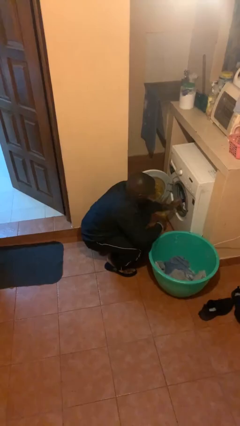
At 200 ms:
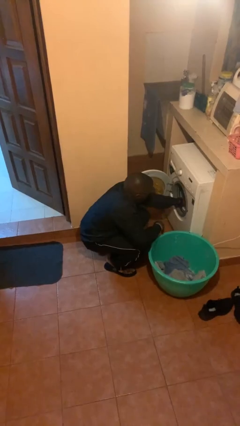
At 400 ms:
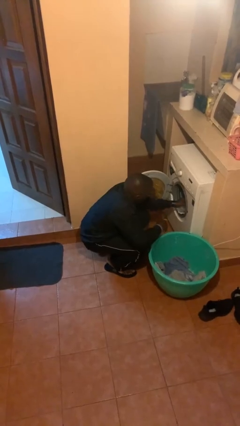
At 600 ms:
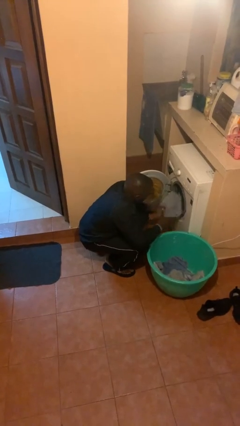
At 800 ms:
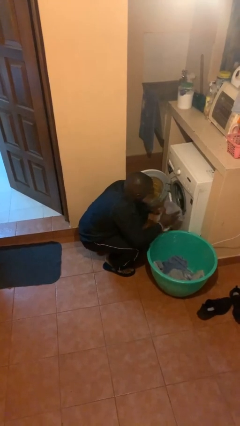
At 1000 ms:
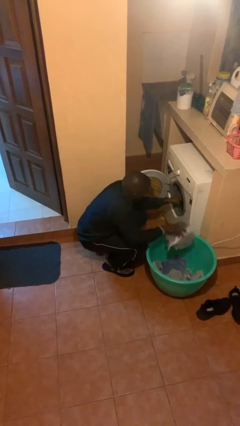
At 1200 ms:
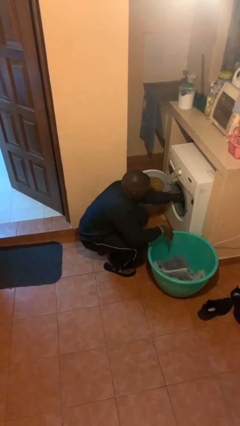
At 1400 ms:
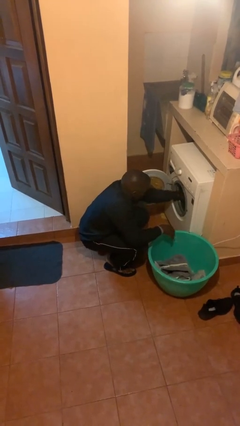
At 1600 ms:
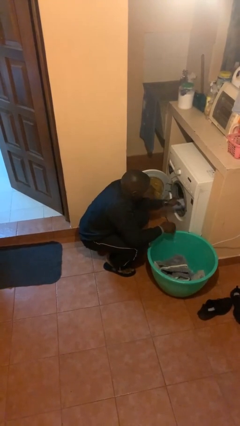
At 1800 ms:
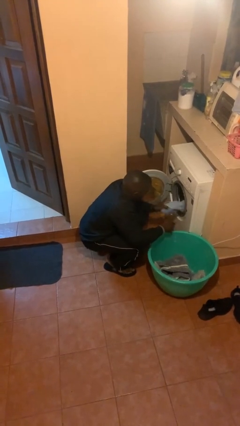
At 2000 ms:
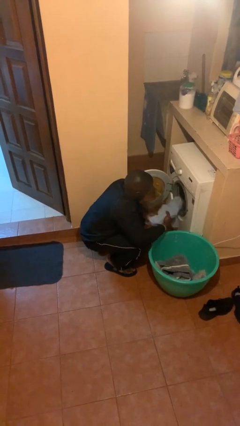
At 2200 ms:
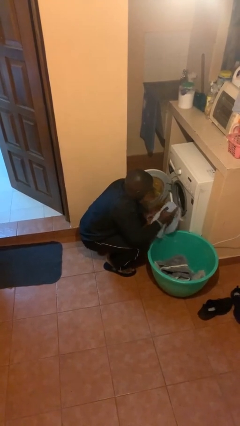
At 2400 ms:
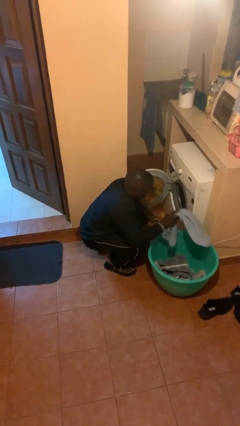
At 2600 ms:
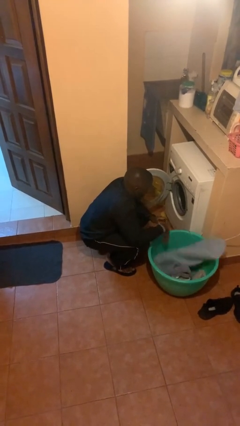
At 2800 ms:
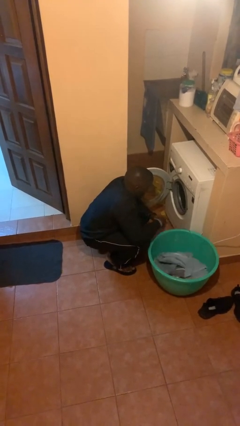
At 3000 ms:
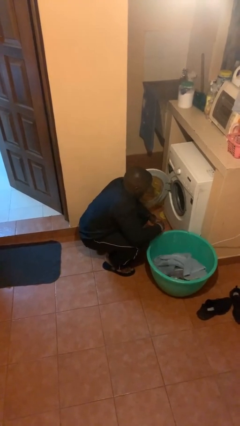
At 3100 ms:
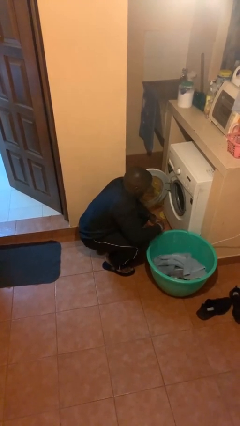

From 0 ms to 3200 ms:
person loads clotheswasher

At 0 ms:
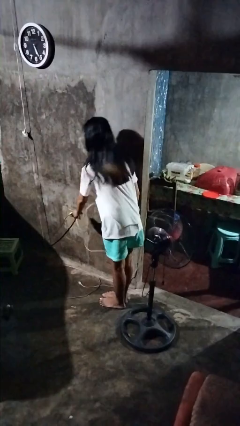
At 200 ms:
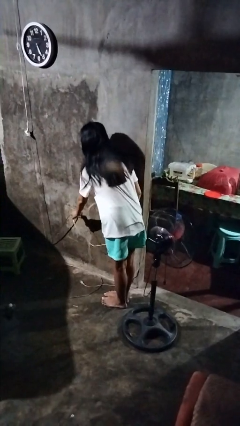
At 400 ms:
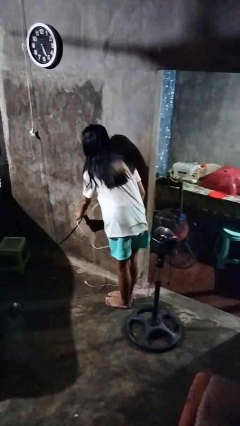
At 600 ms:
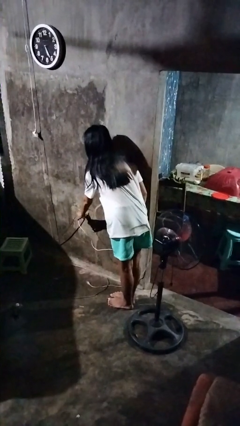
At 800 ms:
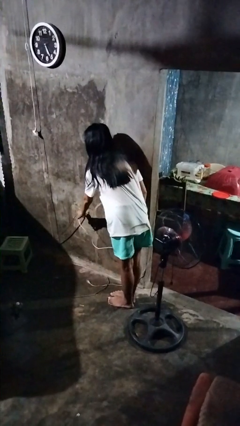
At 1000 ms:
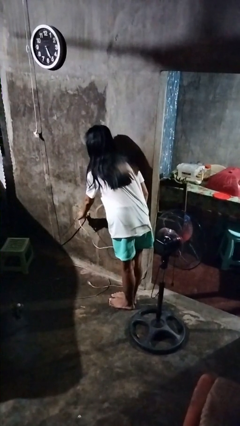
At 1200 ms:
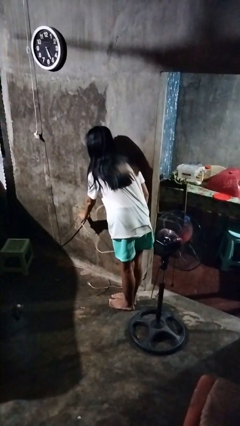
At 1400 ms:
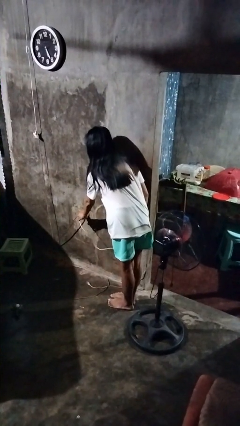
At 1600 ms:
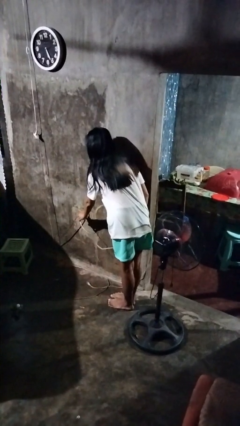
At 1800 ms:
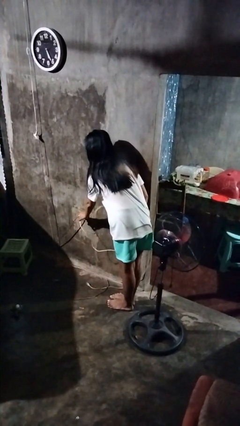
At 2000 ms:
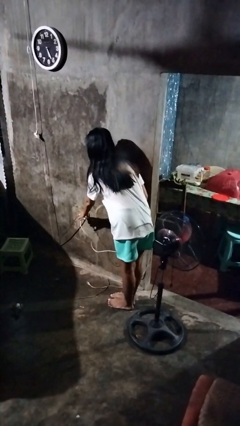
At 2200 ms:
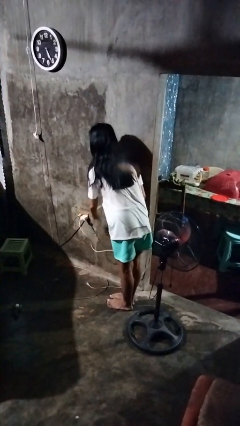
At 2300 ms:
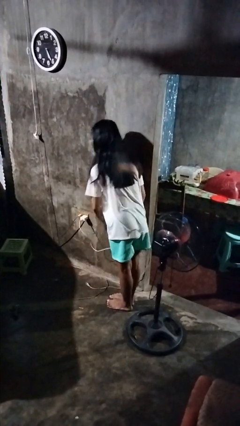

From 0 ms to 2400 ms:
person plugs into electrical socket

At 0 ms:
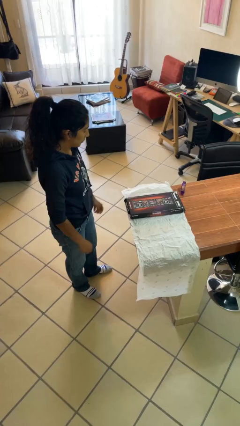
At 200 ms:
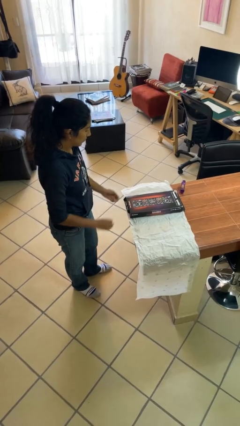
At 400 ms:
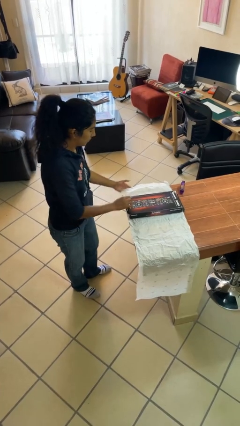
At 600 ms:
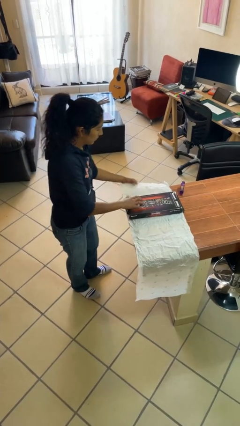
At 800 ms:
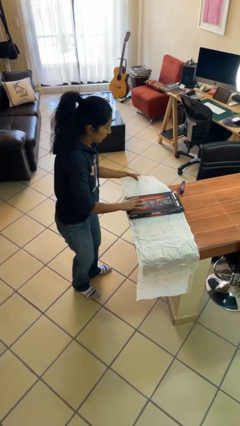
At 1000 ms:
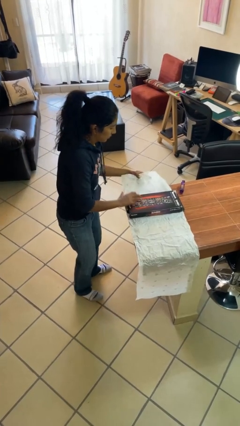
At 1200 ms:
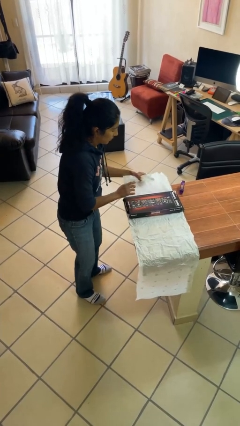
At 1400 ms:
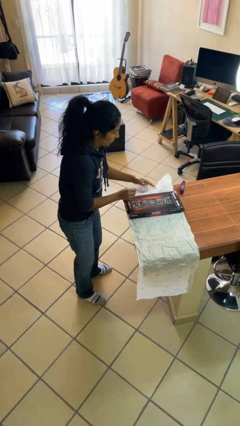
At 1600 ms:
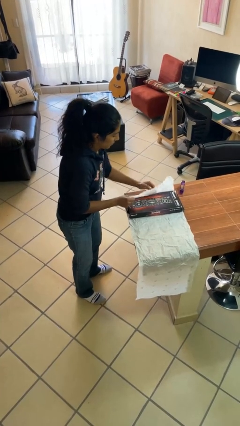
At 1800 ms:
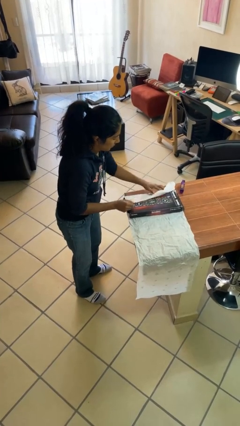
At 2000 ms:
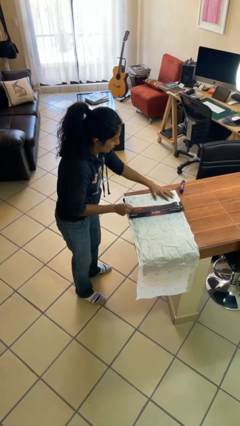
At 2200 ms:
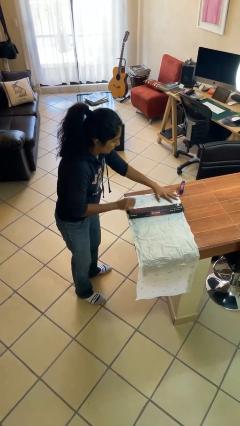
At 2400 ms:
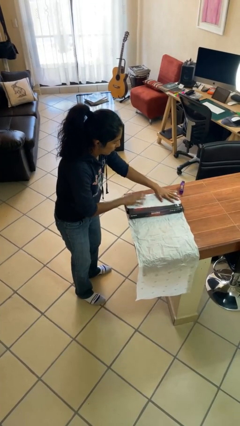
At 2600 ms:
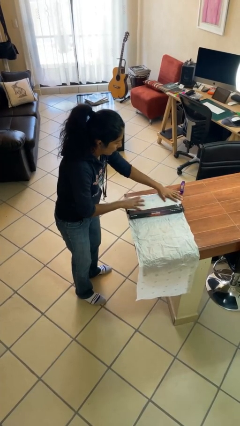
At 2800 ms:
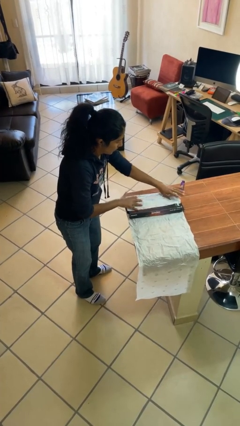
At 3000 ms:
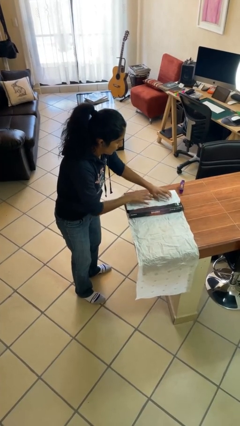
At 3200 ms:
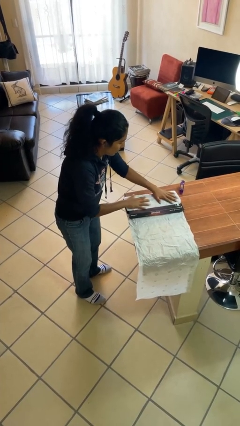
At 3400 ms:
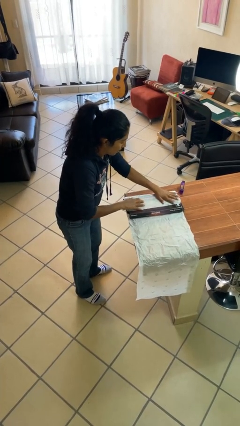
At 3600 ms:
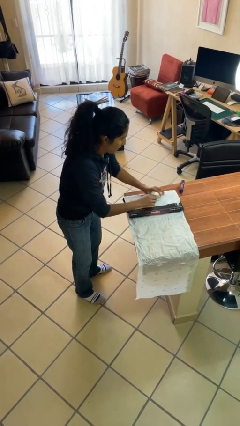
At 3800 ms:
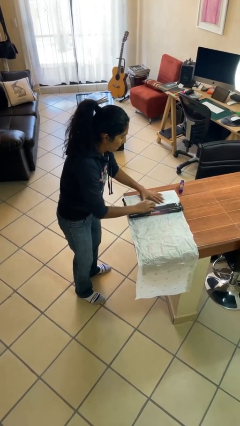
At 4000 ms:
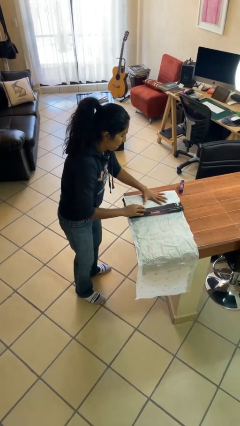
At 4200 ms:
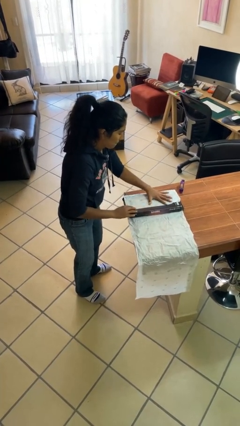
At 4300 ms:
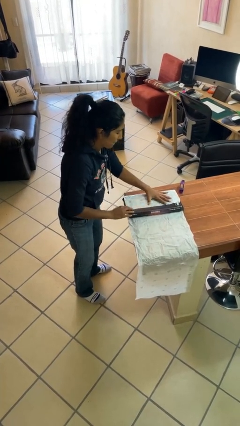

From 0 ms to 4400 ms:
person wraps box

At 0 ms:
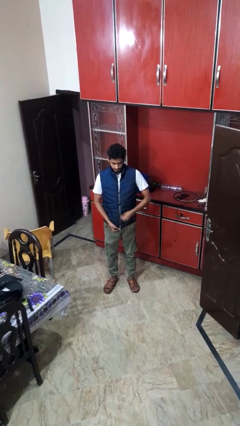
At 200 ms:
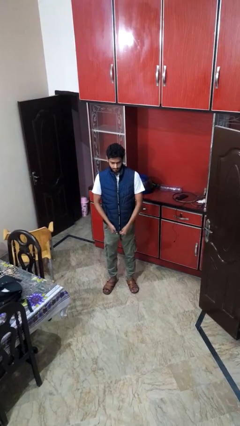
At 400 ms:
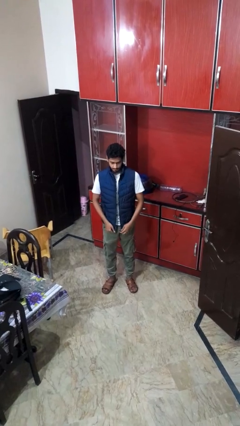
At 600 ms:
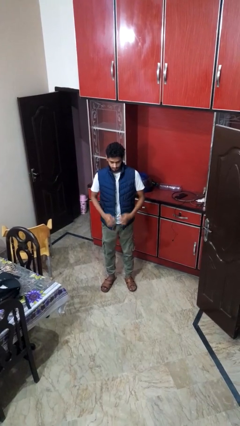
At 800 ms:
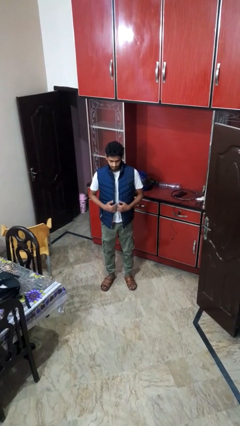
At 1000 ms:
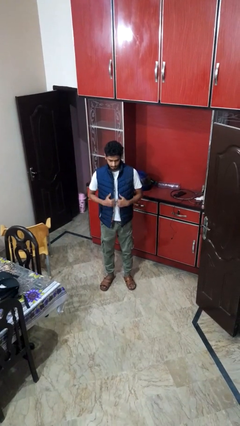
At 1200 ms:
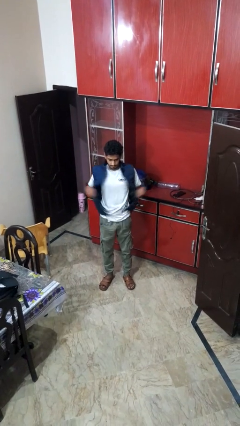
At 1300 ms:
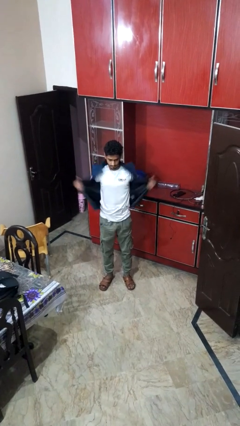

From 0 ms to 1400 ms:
person unzips jacket

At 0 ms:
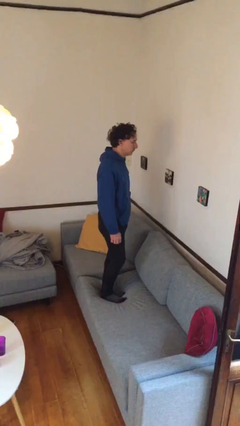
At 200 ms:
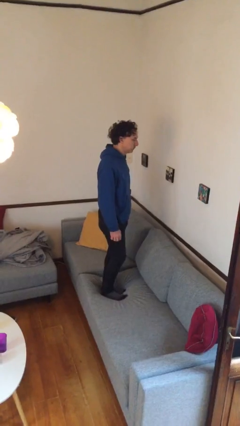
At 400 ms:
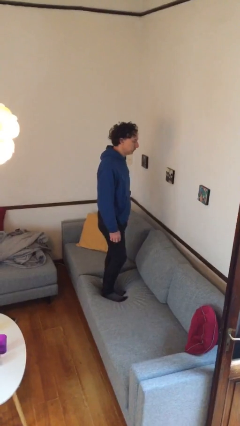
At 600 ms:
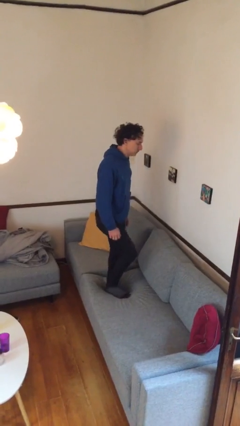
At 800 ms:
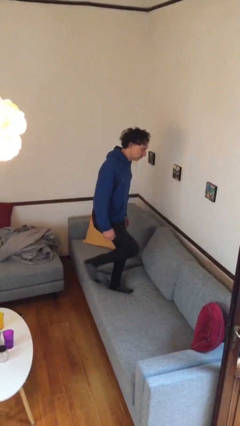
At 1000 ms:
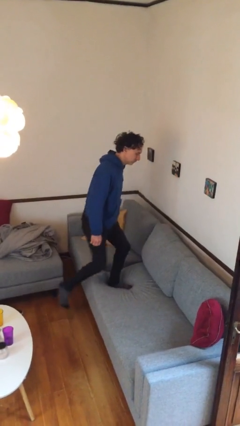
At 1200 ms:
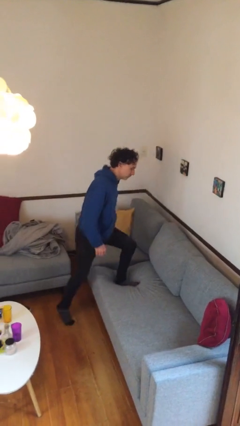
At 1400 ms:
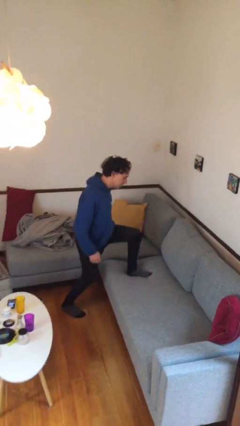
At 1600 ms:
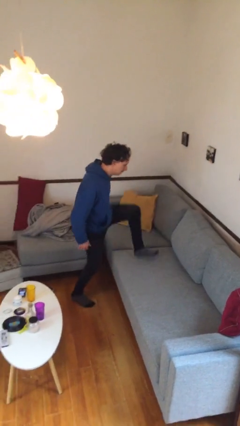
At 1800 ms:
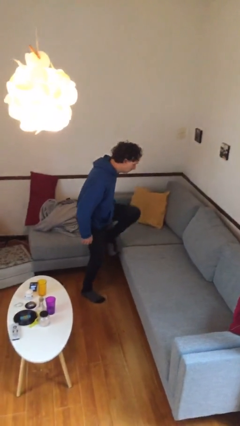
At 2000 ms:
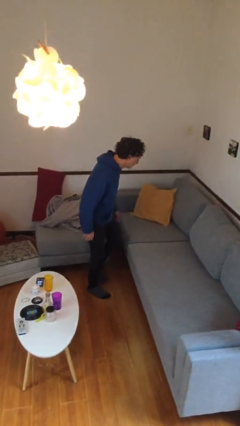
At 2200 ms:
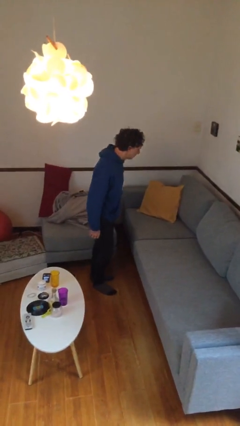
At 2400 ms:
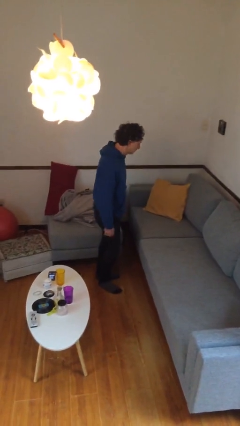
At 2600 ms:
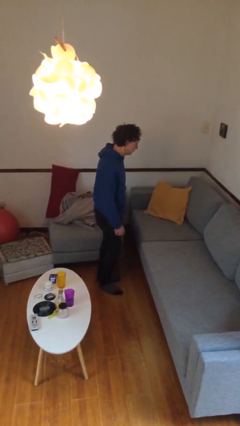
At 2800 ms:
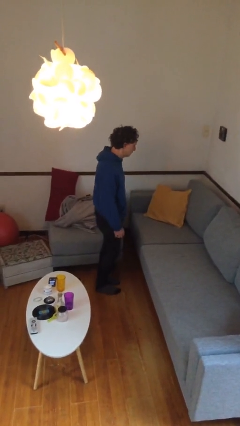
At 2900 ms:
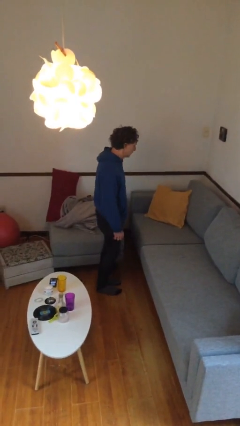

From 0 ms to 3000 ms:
person climbs off couch

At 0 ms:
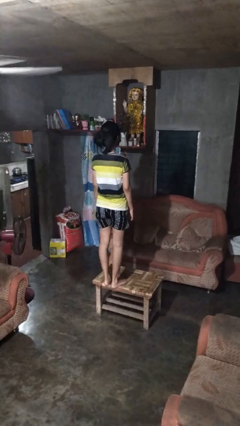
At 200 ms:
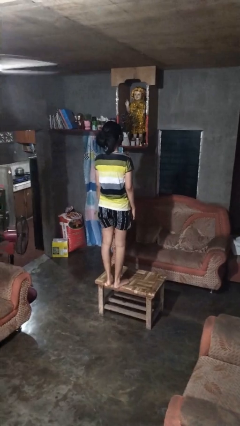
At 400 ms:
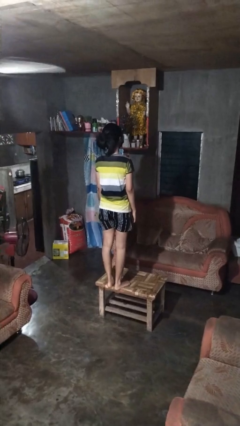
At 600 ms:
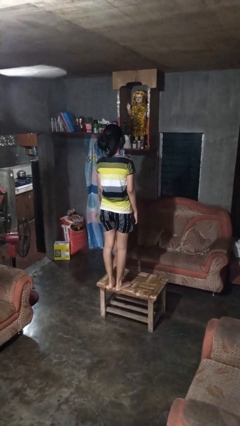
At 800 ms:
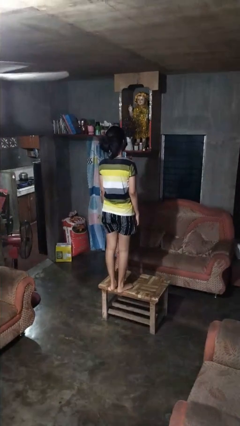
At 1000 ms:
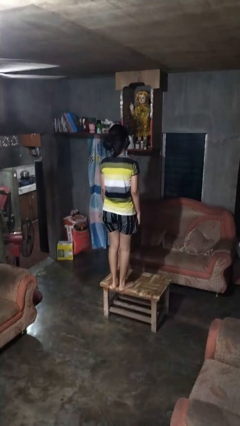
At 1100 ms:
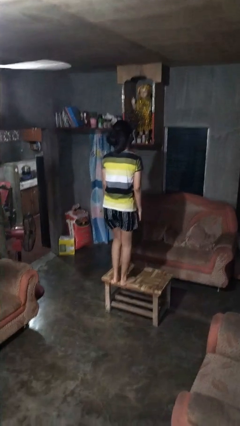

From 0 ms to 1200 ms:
person climbs off table

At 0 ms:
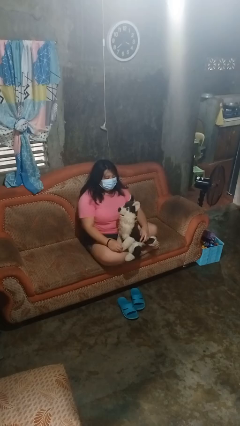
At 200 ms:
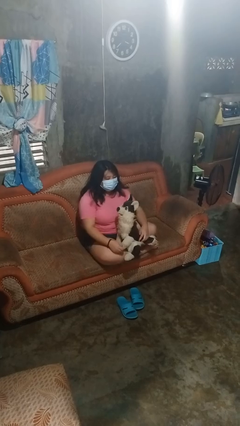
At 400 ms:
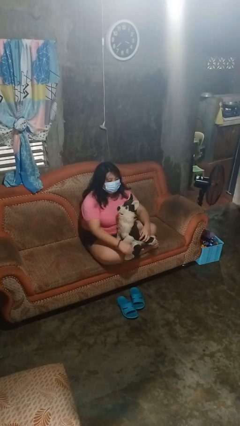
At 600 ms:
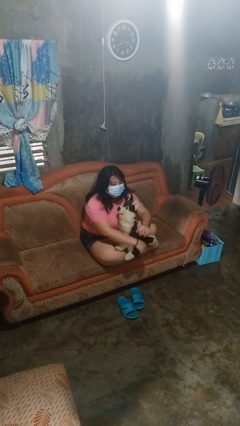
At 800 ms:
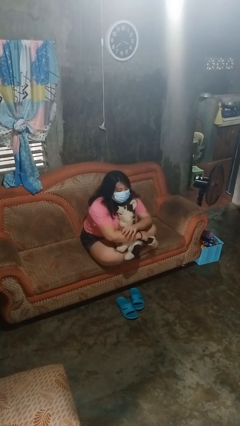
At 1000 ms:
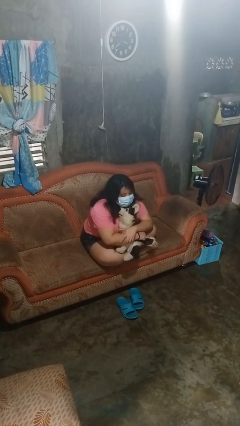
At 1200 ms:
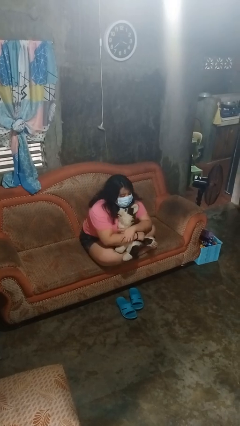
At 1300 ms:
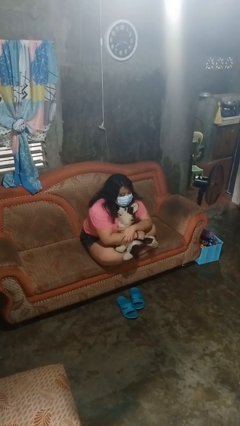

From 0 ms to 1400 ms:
person hugs stuffed animal

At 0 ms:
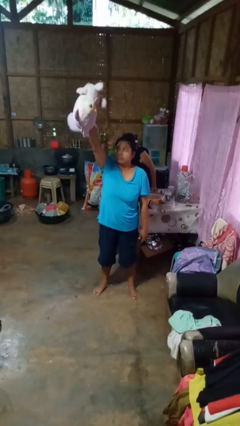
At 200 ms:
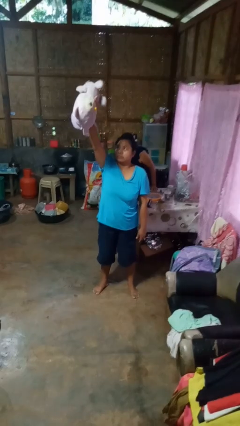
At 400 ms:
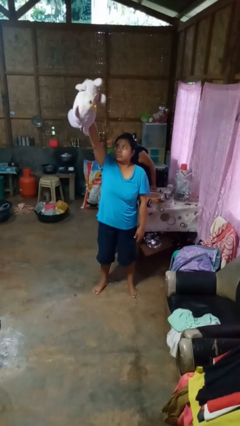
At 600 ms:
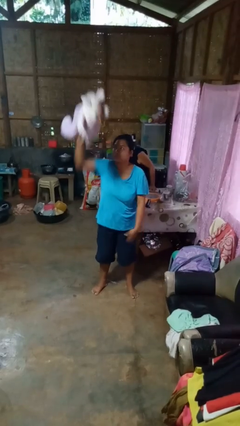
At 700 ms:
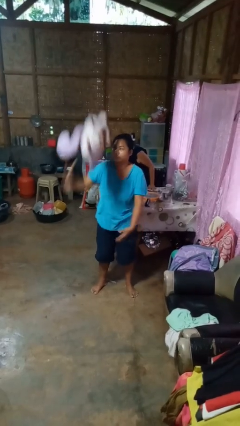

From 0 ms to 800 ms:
person drops object
